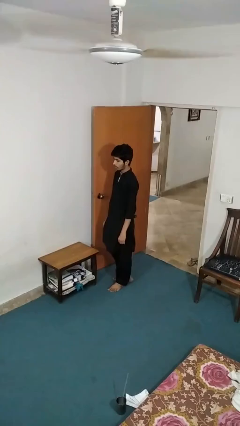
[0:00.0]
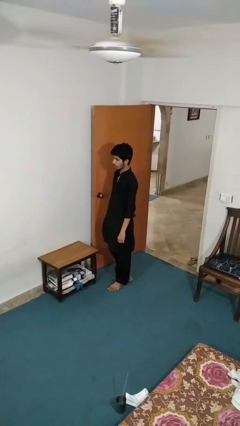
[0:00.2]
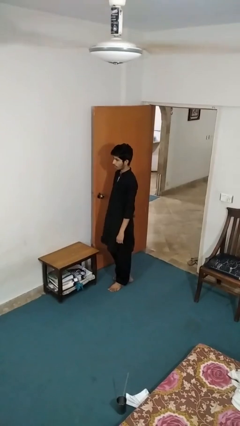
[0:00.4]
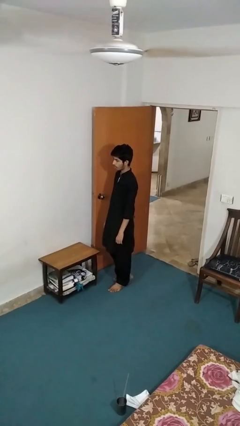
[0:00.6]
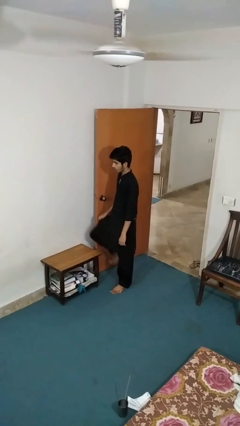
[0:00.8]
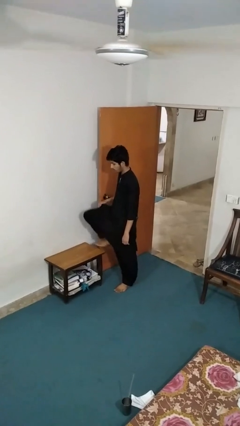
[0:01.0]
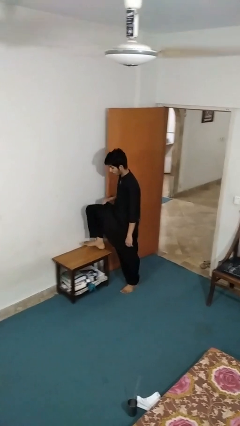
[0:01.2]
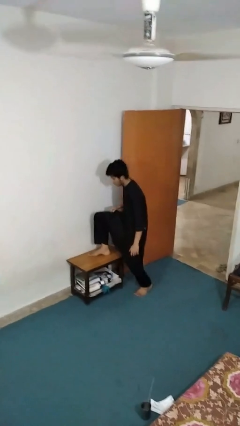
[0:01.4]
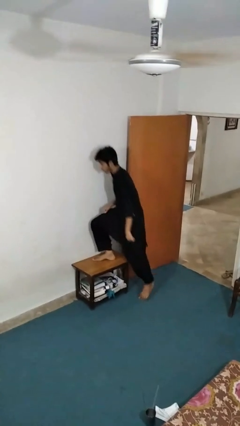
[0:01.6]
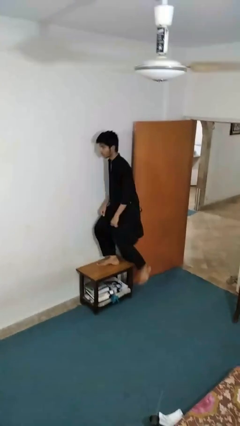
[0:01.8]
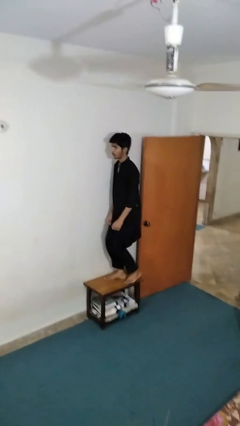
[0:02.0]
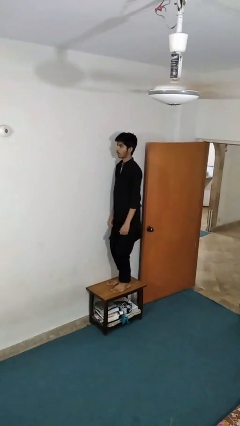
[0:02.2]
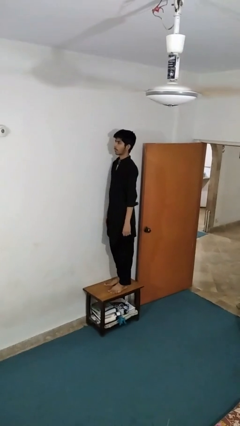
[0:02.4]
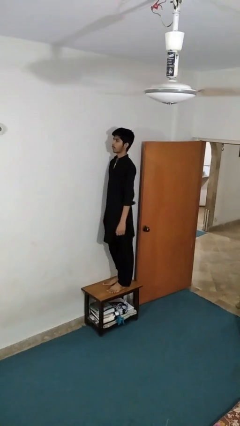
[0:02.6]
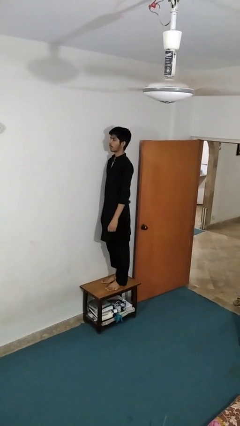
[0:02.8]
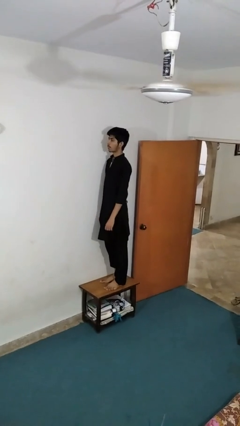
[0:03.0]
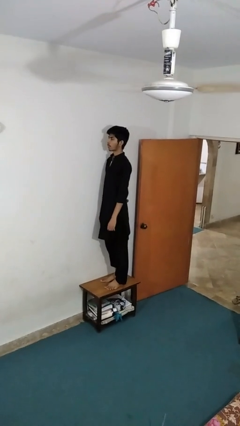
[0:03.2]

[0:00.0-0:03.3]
person climbs on table

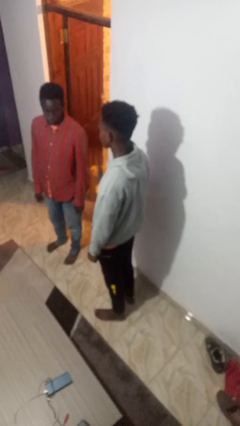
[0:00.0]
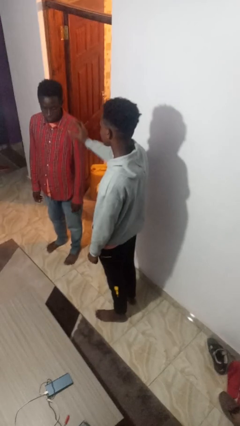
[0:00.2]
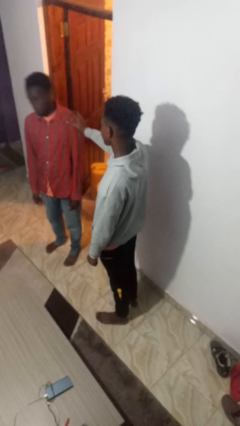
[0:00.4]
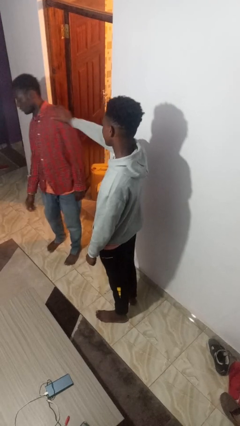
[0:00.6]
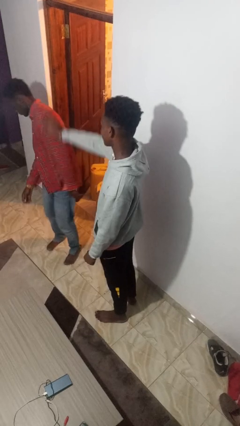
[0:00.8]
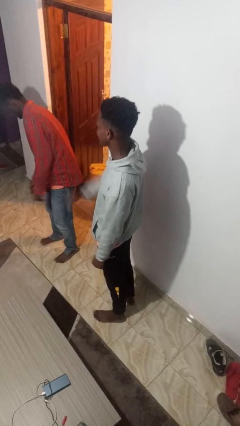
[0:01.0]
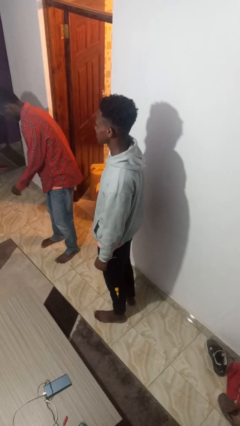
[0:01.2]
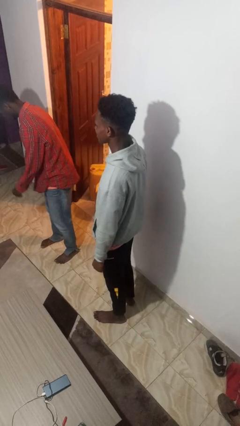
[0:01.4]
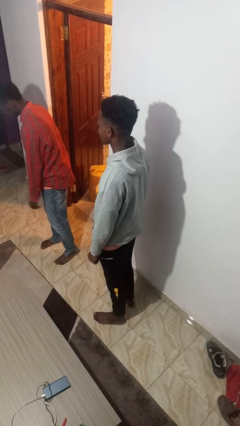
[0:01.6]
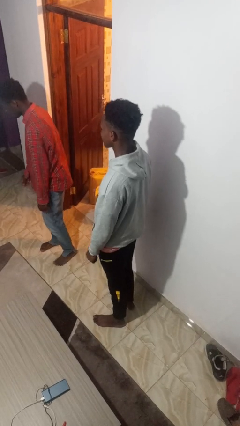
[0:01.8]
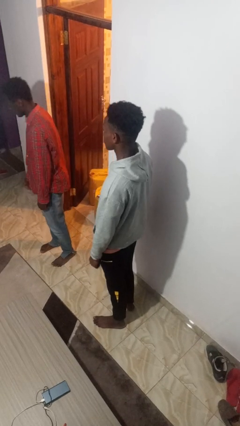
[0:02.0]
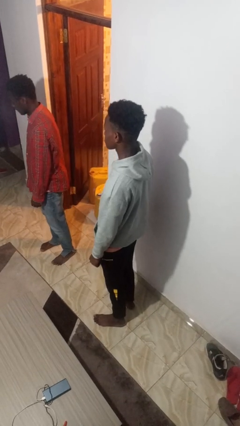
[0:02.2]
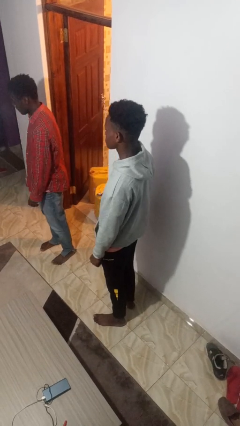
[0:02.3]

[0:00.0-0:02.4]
person shoves person

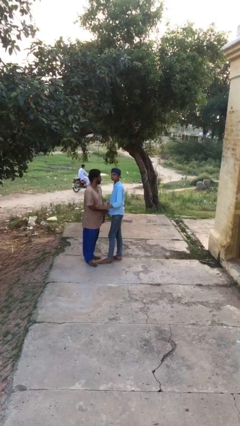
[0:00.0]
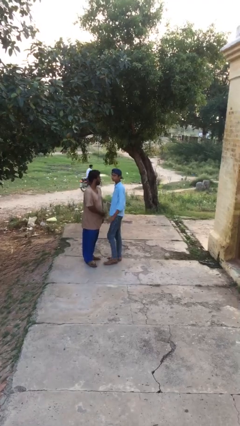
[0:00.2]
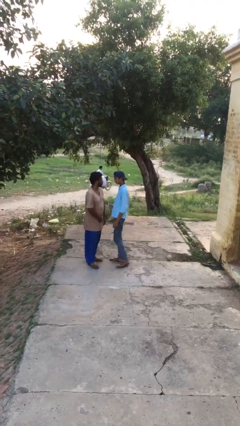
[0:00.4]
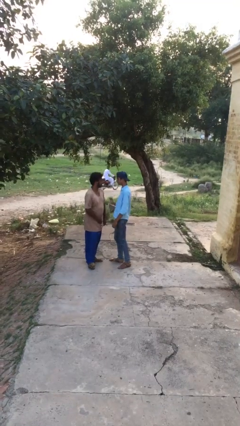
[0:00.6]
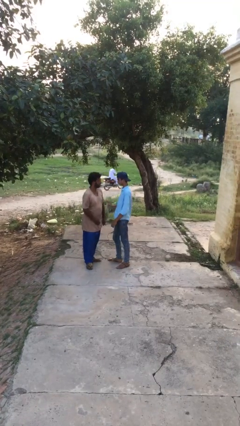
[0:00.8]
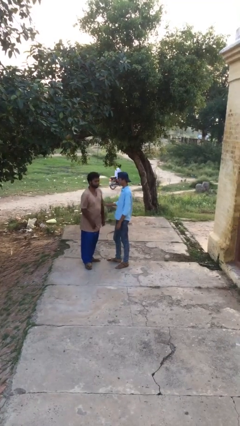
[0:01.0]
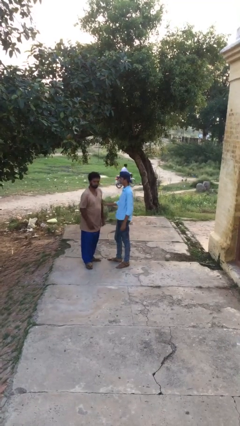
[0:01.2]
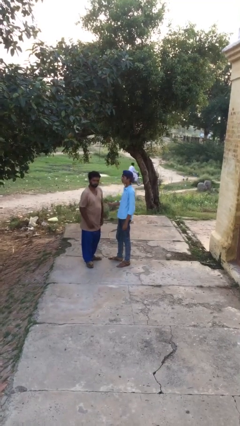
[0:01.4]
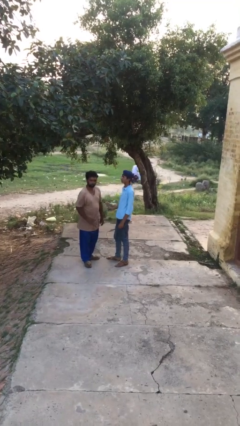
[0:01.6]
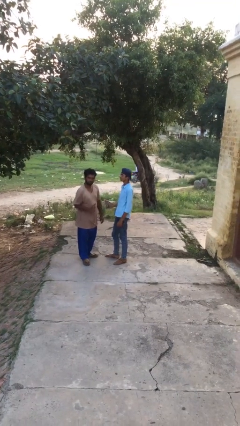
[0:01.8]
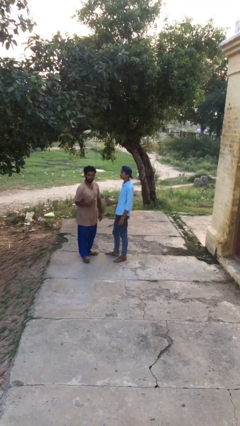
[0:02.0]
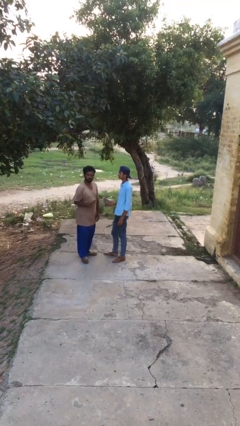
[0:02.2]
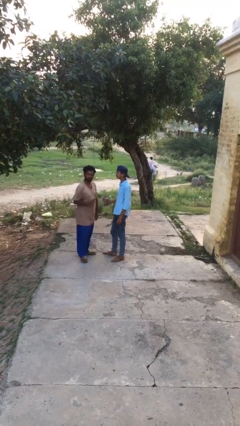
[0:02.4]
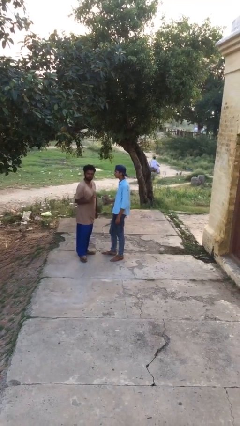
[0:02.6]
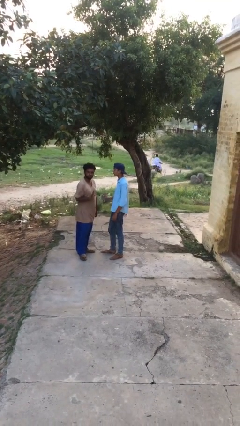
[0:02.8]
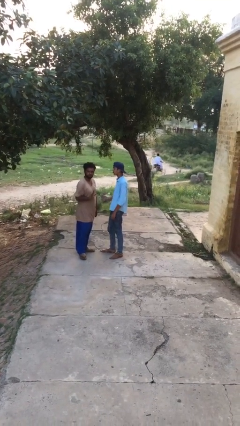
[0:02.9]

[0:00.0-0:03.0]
person talks to person

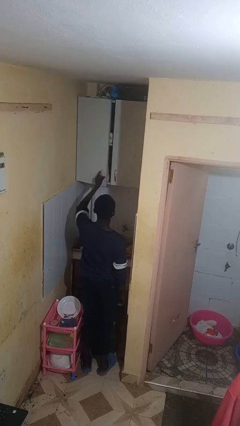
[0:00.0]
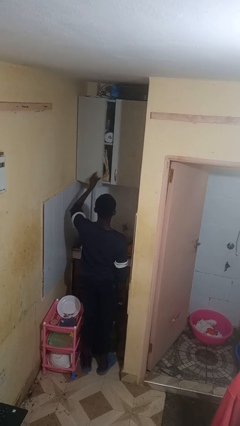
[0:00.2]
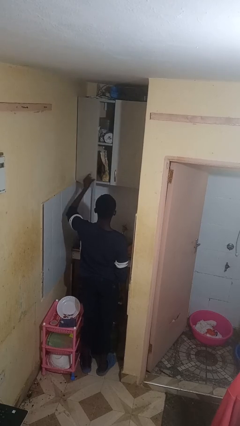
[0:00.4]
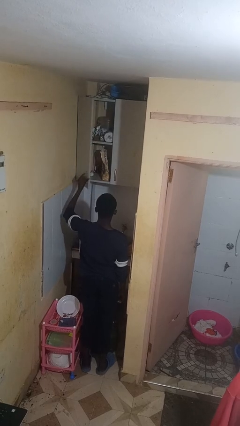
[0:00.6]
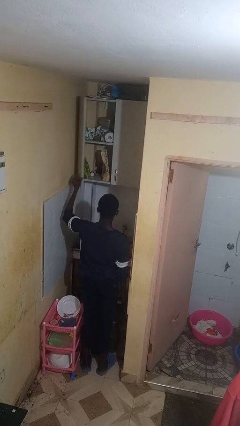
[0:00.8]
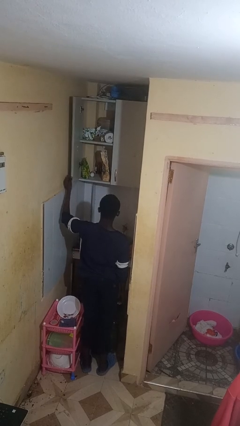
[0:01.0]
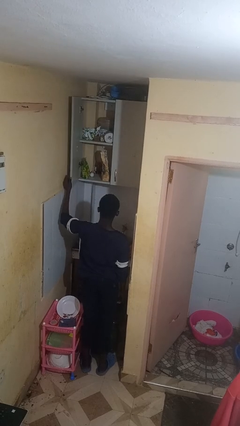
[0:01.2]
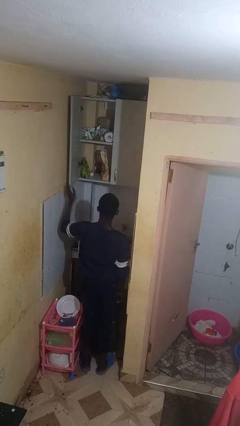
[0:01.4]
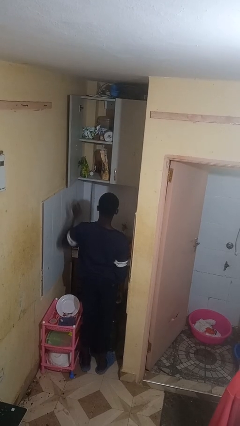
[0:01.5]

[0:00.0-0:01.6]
person opens cabinet

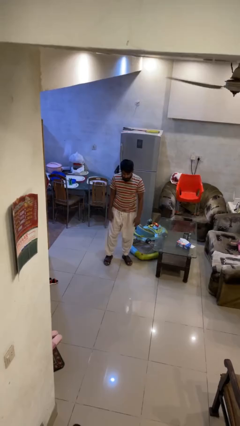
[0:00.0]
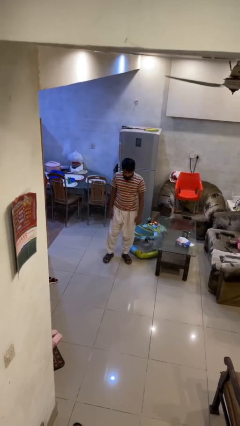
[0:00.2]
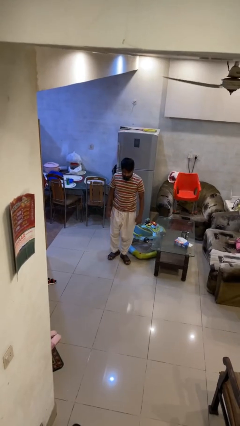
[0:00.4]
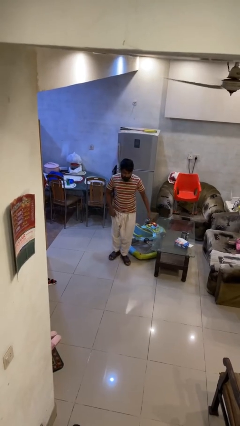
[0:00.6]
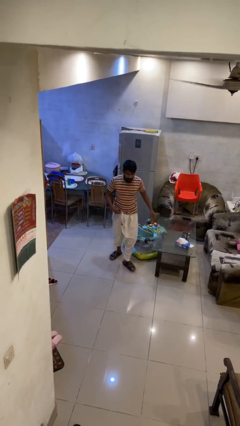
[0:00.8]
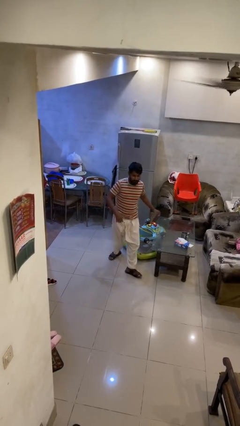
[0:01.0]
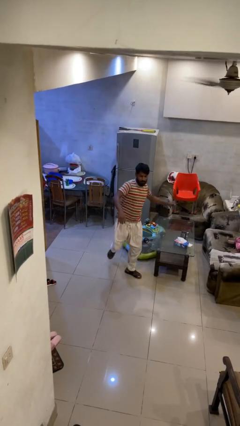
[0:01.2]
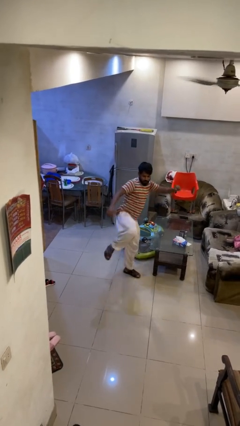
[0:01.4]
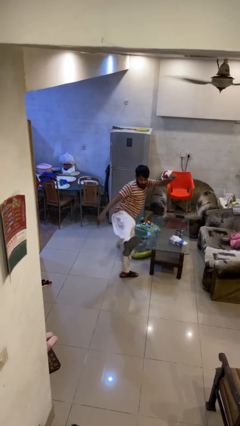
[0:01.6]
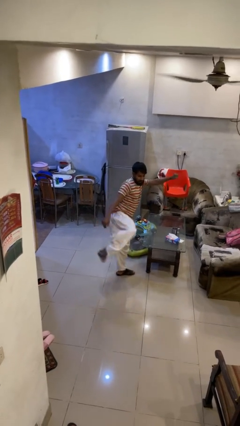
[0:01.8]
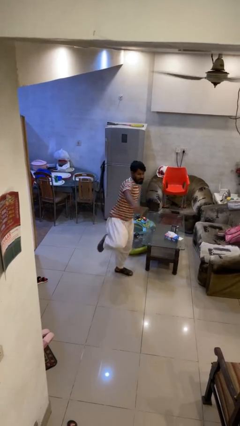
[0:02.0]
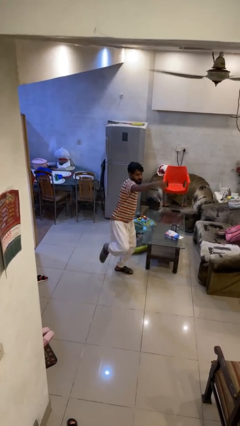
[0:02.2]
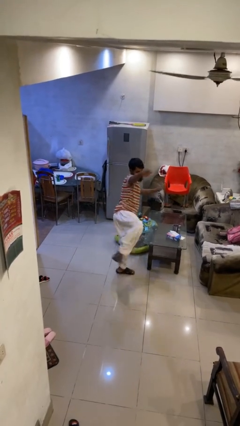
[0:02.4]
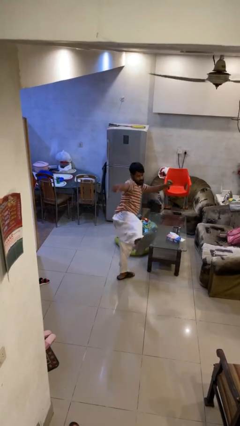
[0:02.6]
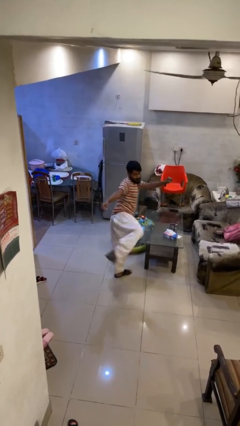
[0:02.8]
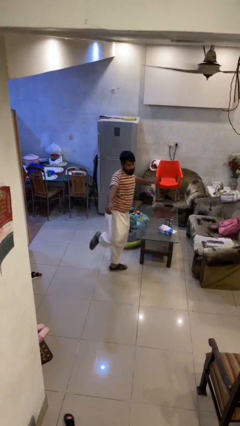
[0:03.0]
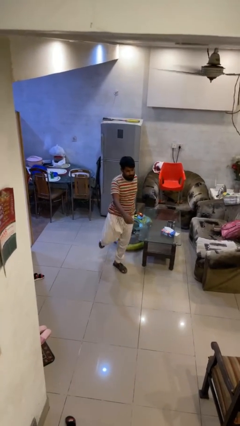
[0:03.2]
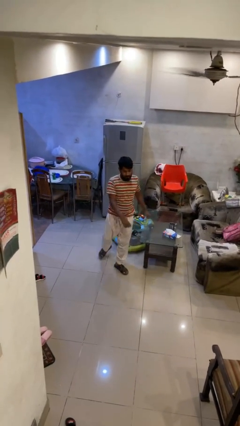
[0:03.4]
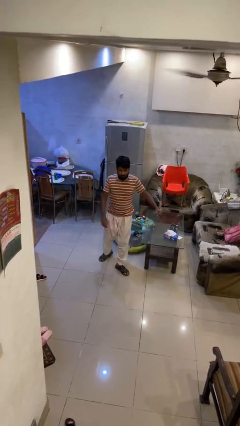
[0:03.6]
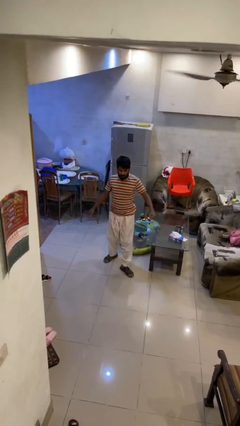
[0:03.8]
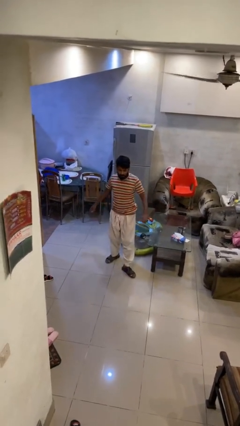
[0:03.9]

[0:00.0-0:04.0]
person karate kicks

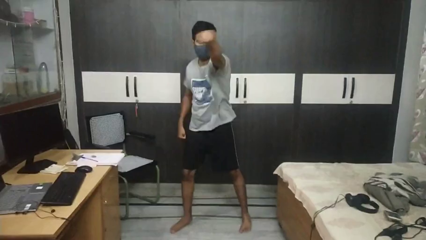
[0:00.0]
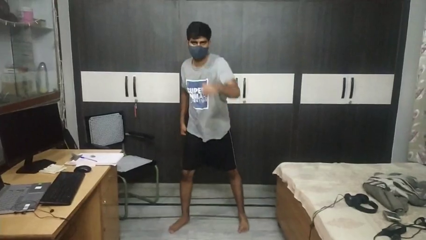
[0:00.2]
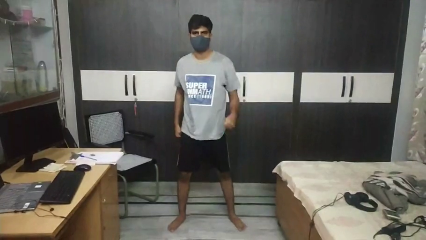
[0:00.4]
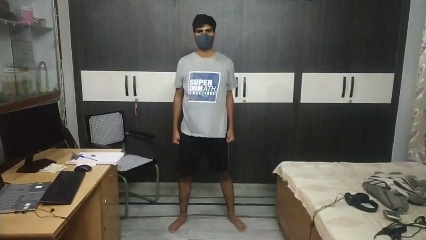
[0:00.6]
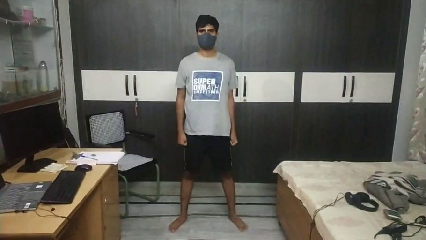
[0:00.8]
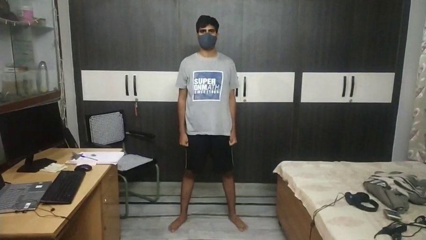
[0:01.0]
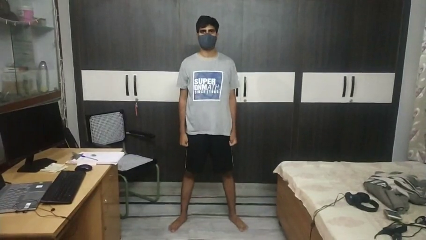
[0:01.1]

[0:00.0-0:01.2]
person punches

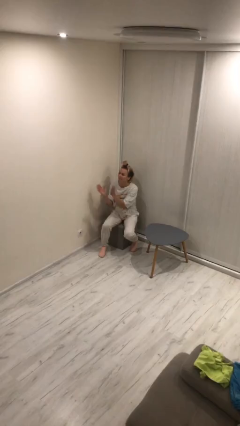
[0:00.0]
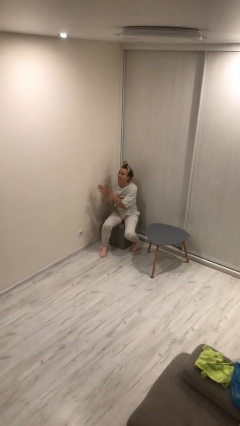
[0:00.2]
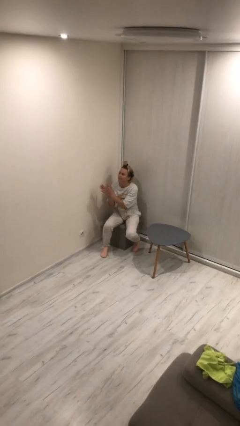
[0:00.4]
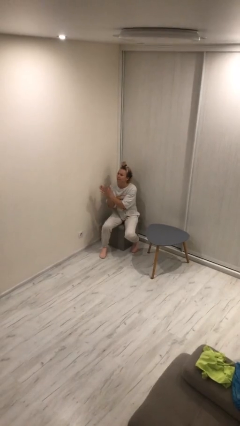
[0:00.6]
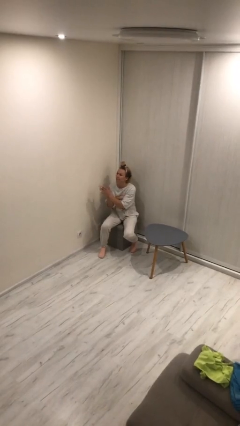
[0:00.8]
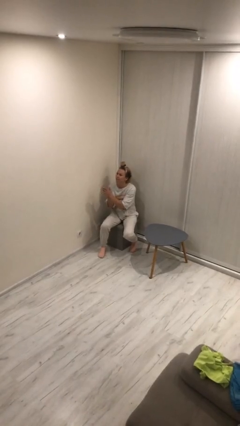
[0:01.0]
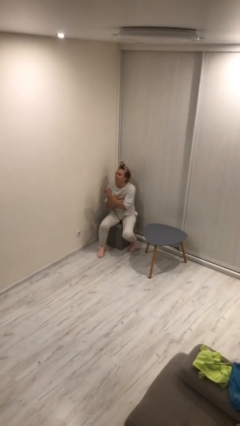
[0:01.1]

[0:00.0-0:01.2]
person claps hands

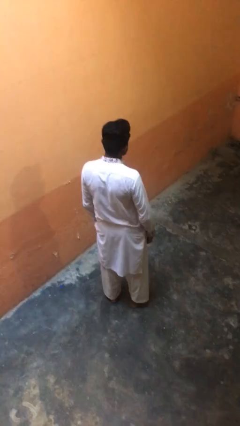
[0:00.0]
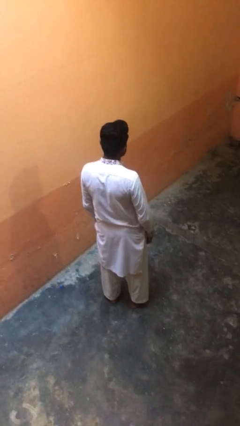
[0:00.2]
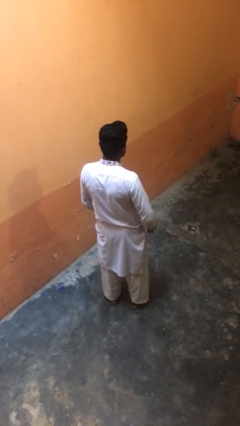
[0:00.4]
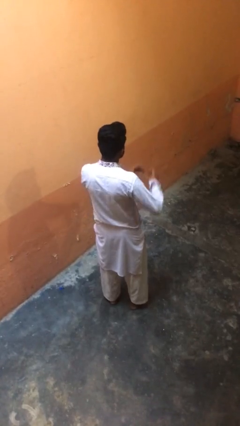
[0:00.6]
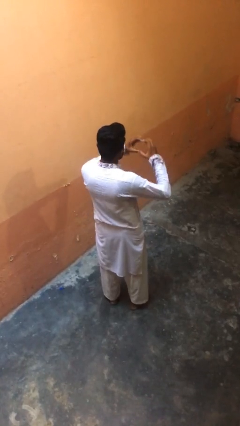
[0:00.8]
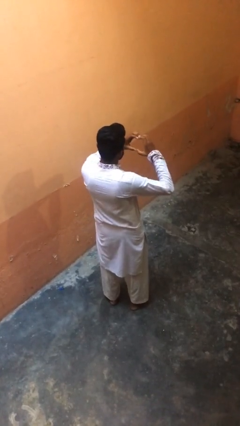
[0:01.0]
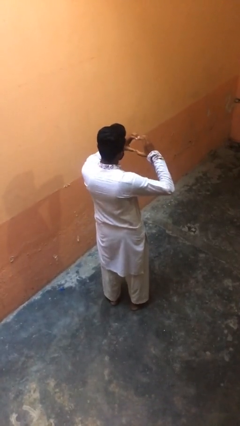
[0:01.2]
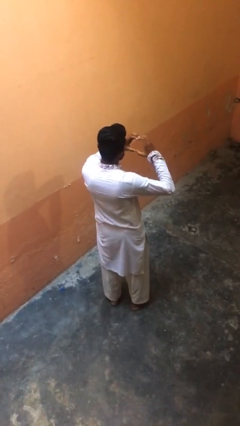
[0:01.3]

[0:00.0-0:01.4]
person gestures heart
